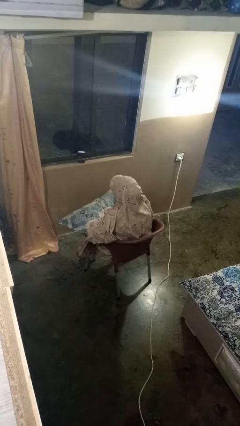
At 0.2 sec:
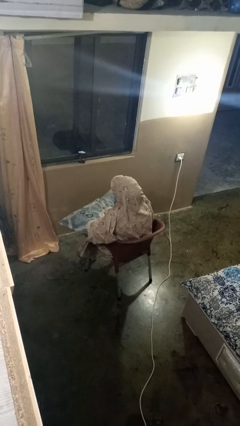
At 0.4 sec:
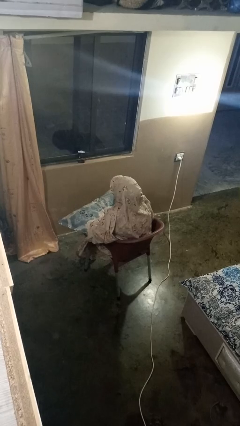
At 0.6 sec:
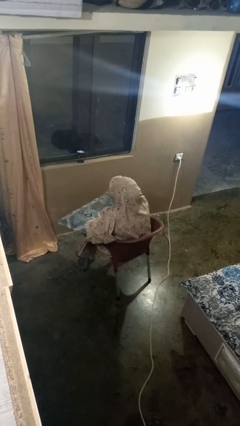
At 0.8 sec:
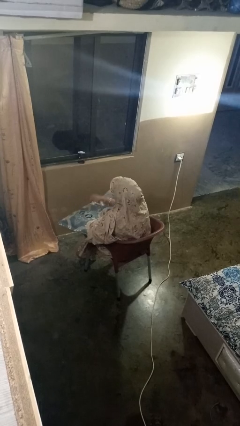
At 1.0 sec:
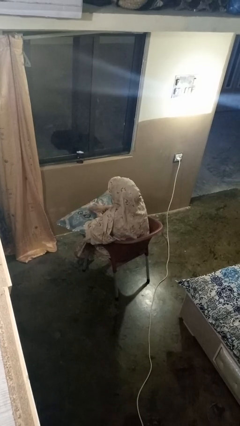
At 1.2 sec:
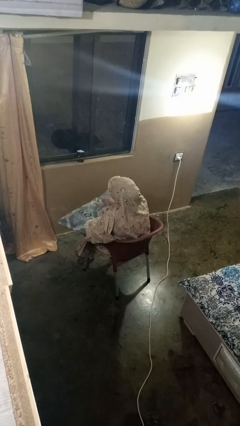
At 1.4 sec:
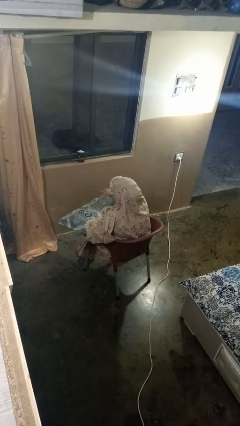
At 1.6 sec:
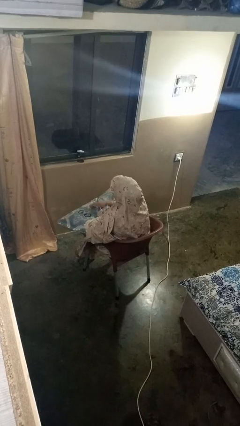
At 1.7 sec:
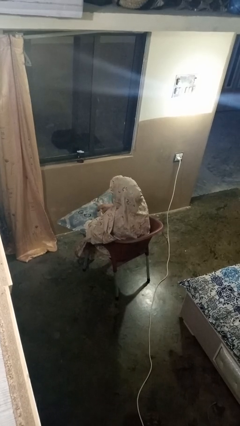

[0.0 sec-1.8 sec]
person waves hand over object

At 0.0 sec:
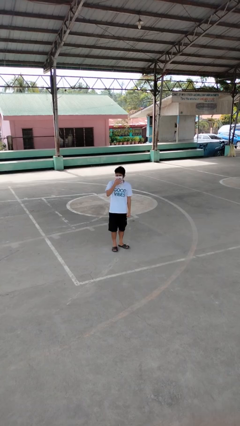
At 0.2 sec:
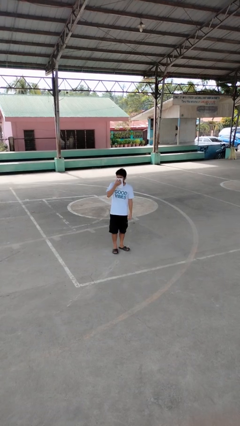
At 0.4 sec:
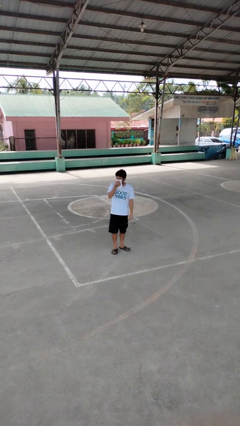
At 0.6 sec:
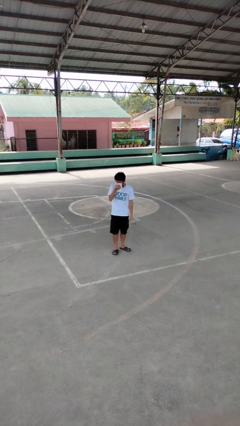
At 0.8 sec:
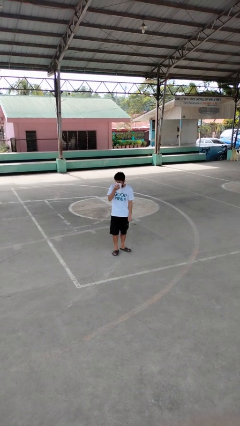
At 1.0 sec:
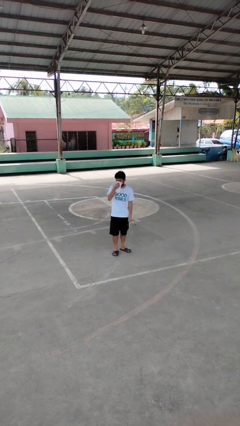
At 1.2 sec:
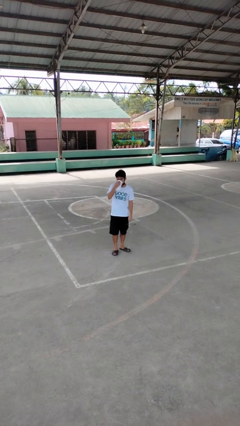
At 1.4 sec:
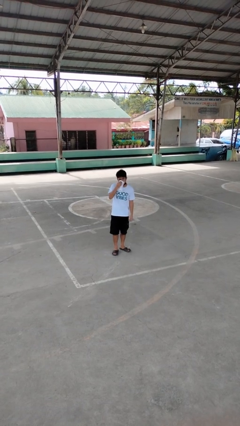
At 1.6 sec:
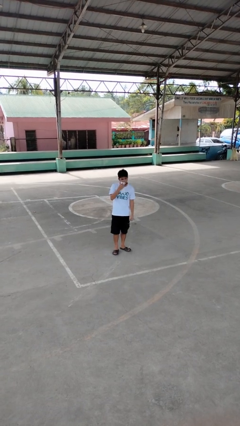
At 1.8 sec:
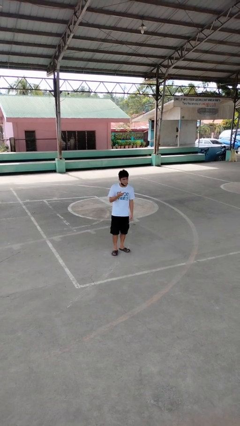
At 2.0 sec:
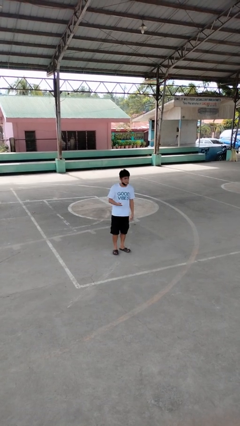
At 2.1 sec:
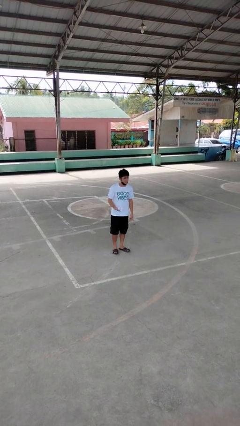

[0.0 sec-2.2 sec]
person blows nose

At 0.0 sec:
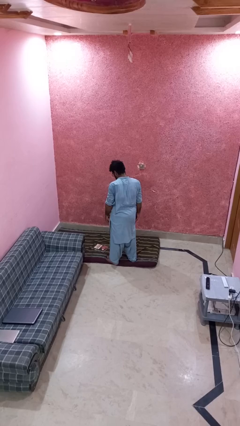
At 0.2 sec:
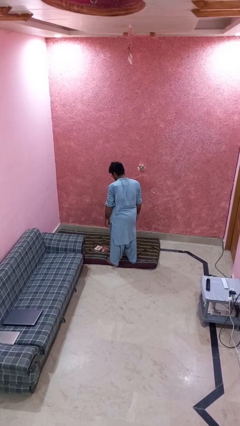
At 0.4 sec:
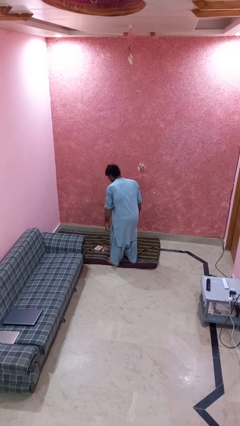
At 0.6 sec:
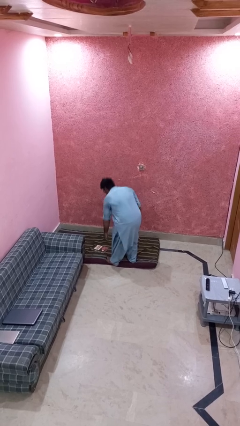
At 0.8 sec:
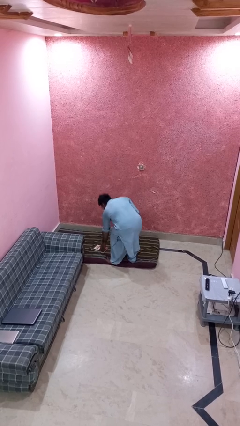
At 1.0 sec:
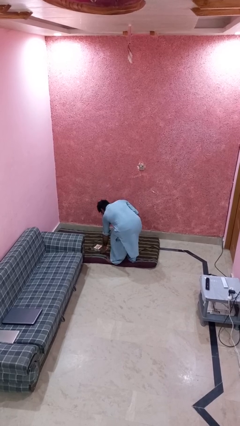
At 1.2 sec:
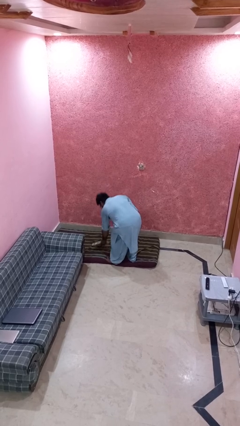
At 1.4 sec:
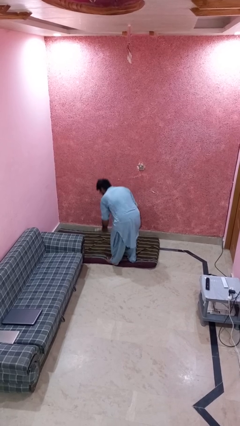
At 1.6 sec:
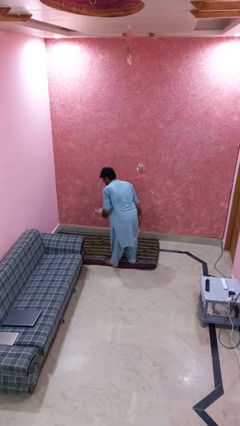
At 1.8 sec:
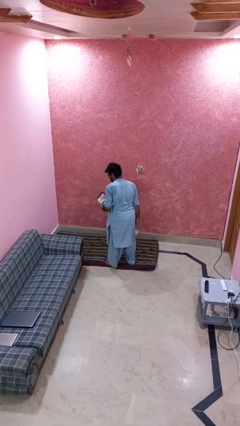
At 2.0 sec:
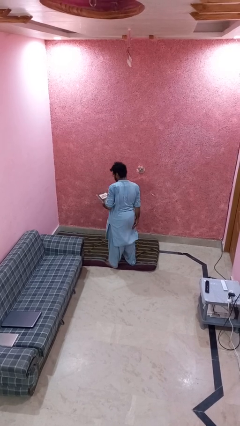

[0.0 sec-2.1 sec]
person picks up object from floor

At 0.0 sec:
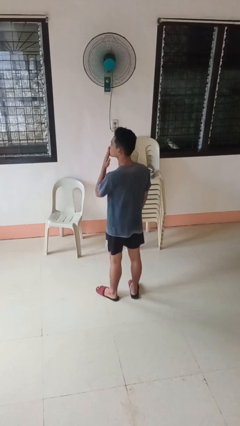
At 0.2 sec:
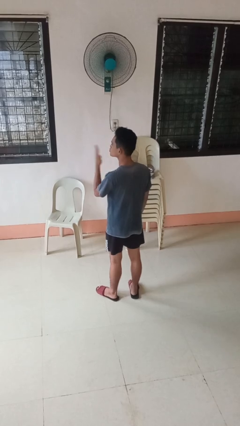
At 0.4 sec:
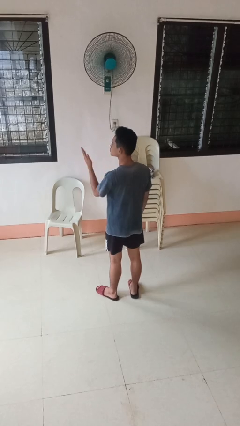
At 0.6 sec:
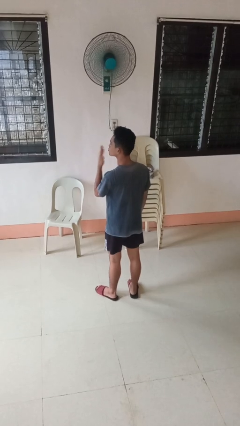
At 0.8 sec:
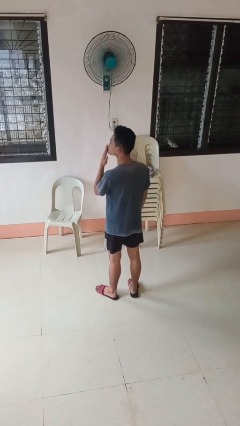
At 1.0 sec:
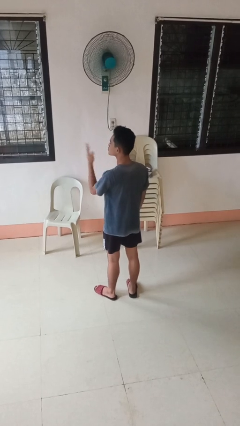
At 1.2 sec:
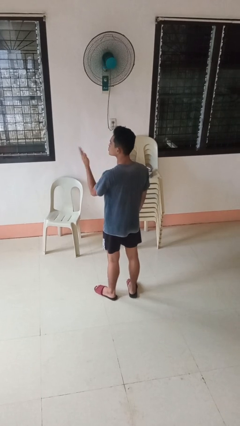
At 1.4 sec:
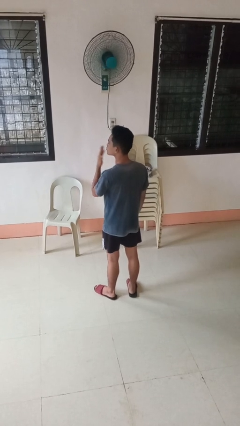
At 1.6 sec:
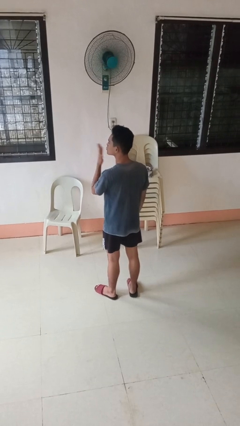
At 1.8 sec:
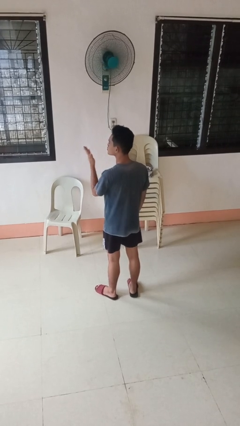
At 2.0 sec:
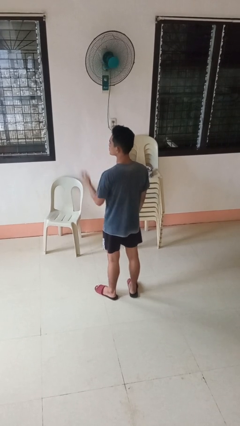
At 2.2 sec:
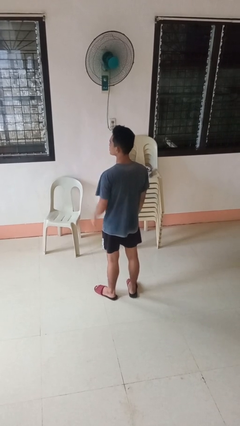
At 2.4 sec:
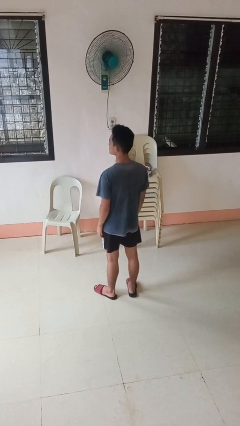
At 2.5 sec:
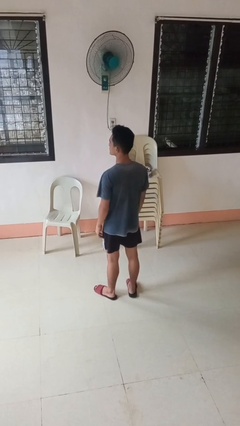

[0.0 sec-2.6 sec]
person gestures blow kiss

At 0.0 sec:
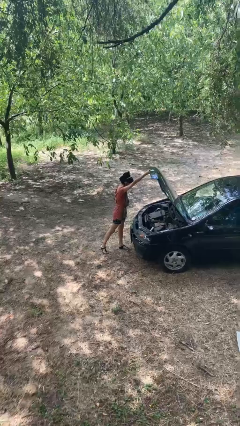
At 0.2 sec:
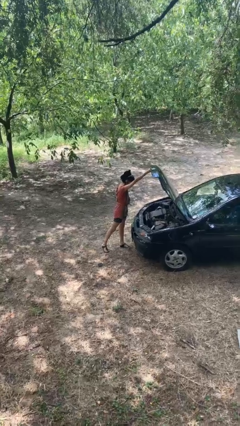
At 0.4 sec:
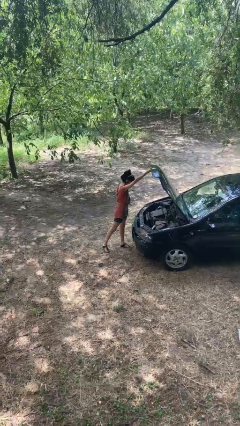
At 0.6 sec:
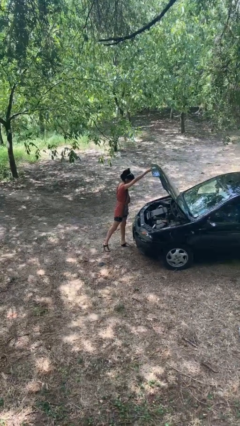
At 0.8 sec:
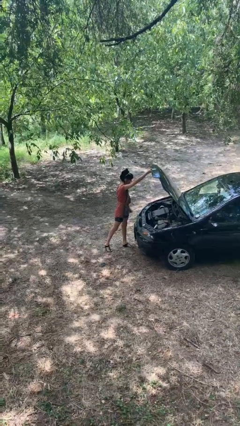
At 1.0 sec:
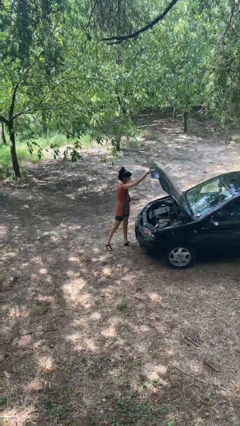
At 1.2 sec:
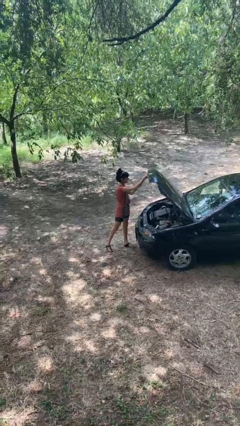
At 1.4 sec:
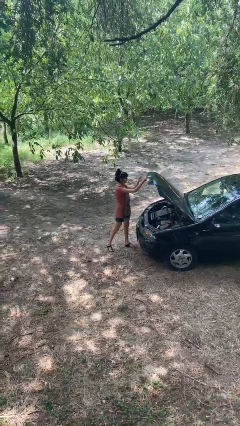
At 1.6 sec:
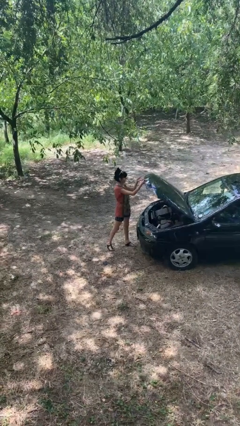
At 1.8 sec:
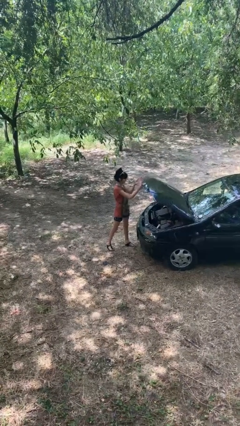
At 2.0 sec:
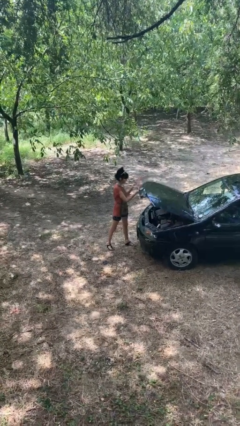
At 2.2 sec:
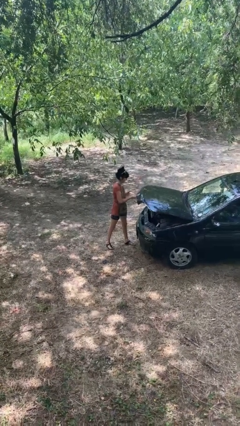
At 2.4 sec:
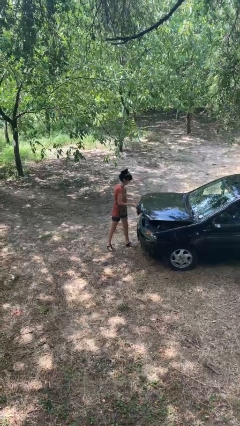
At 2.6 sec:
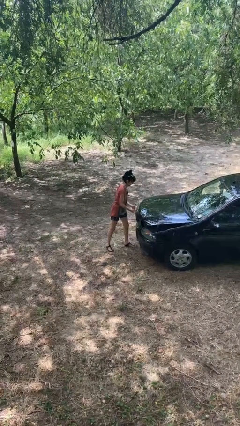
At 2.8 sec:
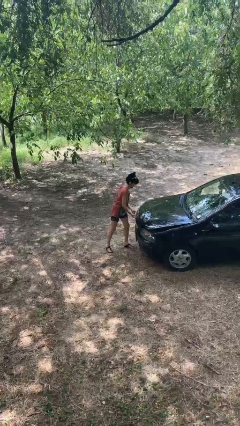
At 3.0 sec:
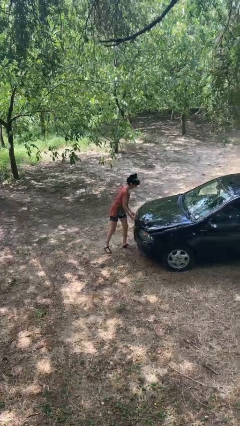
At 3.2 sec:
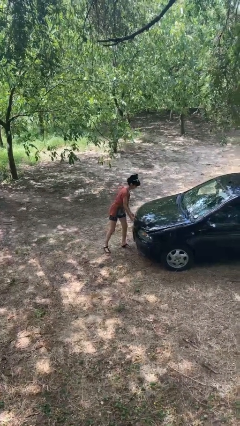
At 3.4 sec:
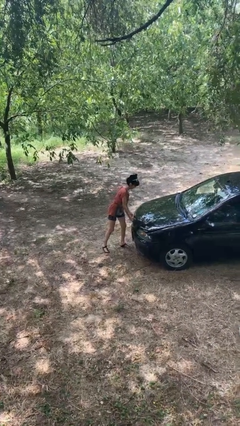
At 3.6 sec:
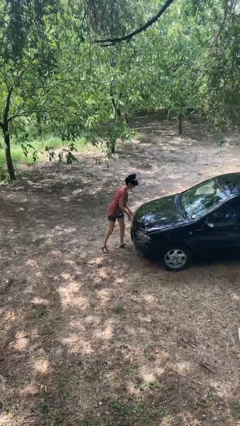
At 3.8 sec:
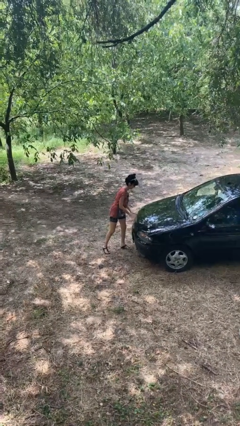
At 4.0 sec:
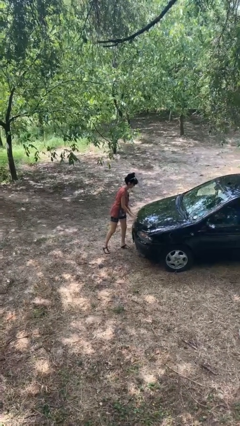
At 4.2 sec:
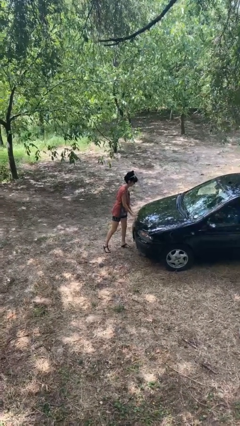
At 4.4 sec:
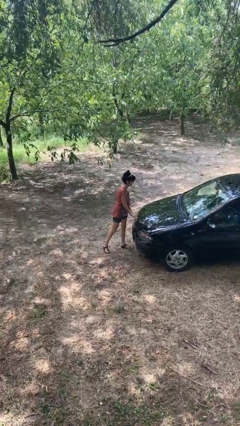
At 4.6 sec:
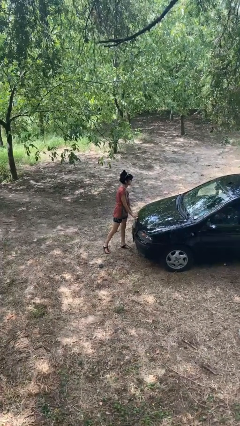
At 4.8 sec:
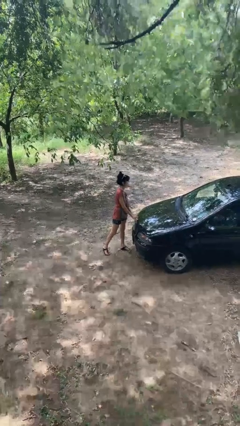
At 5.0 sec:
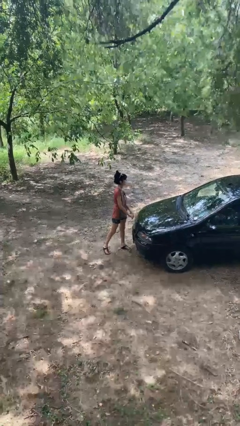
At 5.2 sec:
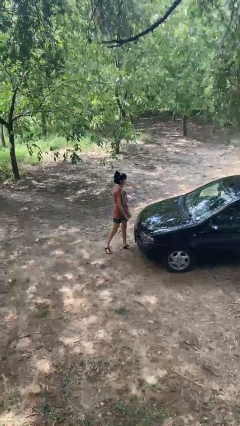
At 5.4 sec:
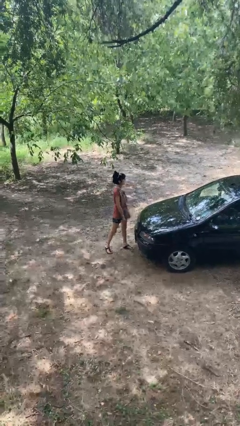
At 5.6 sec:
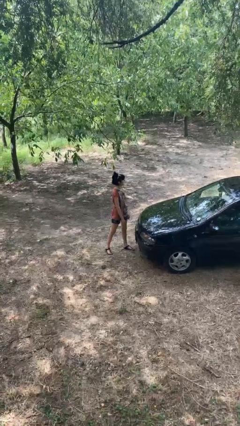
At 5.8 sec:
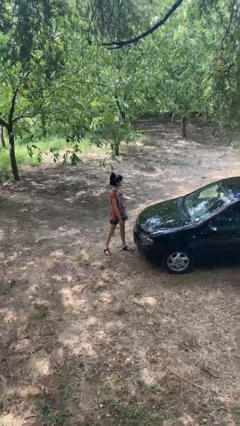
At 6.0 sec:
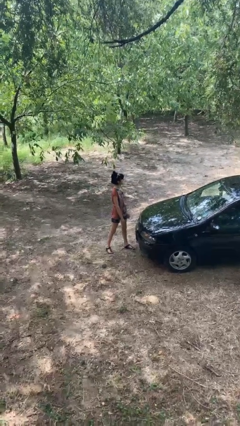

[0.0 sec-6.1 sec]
person closes car hood

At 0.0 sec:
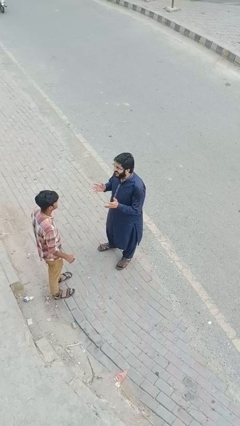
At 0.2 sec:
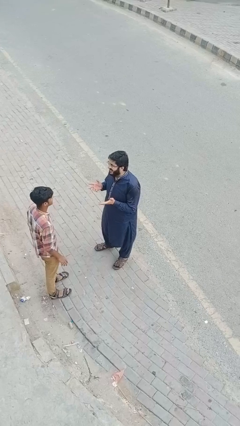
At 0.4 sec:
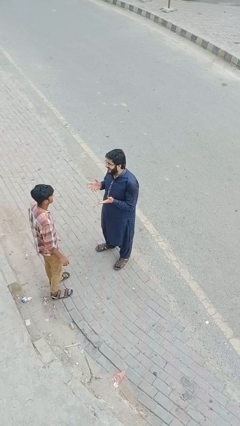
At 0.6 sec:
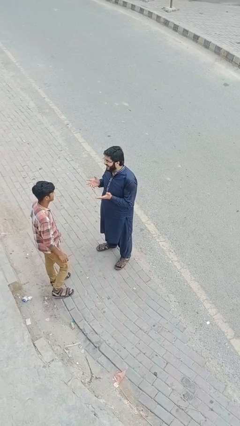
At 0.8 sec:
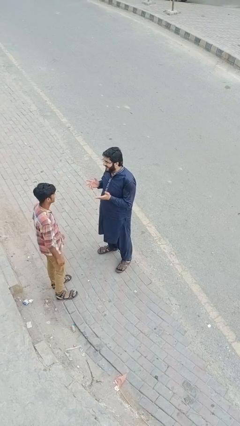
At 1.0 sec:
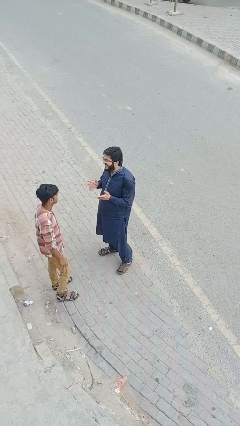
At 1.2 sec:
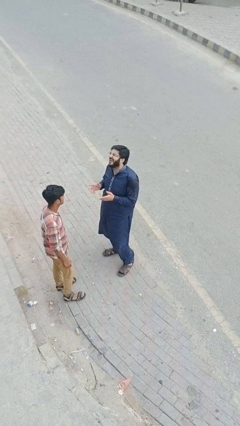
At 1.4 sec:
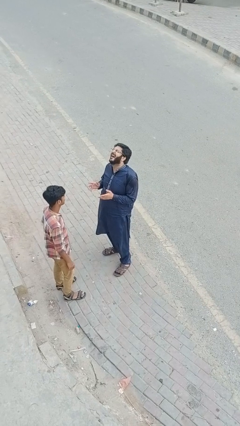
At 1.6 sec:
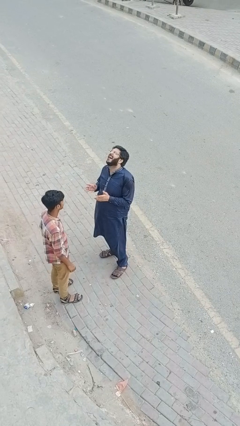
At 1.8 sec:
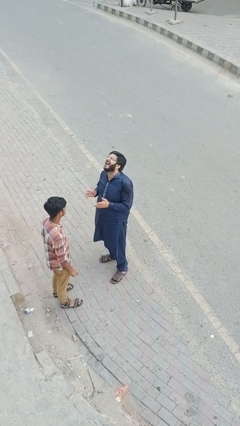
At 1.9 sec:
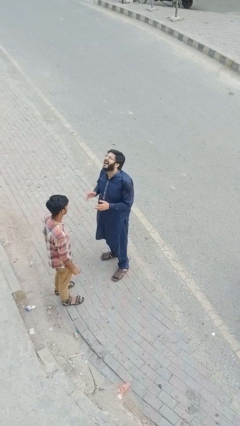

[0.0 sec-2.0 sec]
person laughs with person

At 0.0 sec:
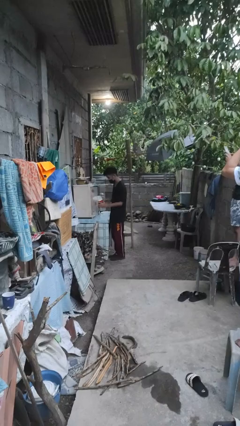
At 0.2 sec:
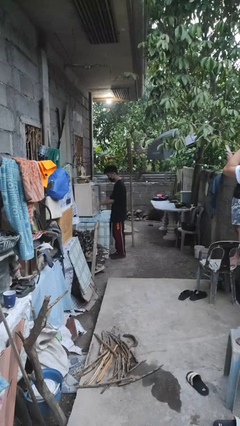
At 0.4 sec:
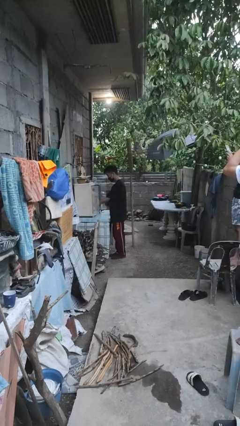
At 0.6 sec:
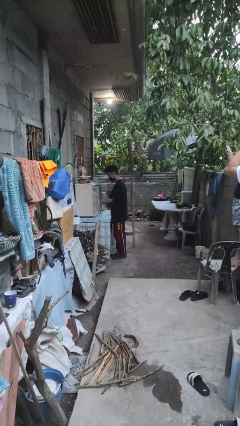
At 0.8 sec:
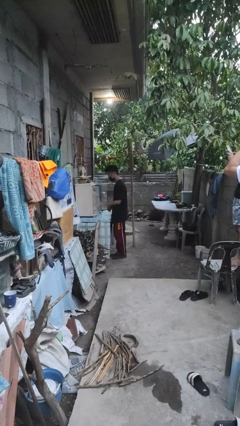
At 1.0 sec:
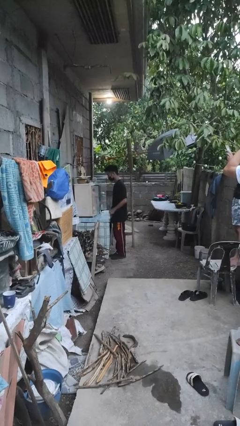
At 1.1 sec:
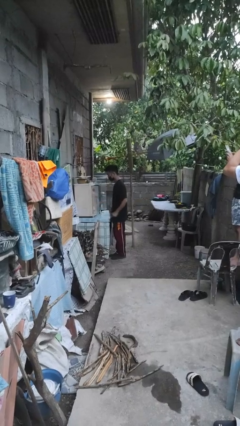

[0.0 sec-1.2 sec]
person puts down object into cabinet
